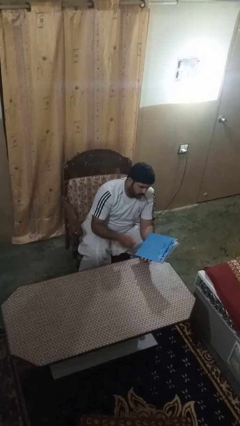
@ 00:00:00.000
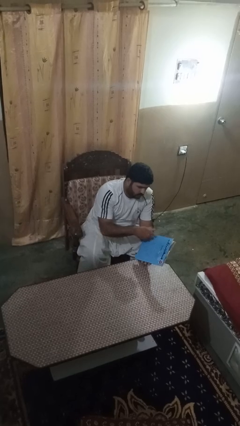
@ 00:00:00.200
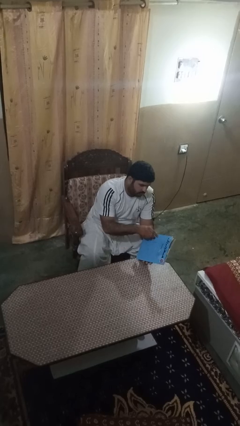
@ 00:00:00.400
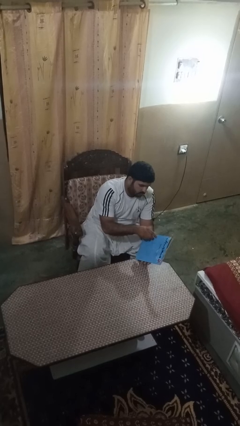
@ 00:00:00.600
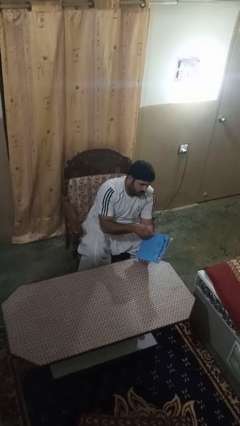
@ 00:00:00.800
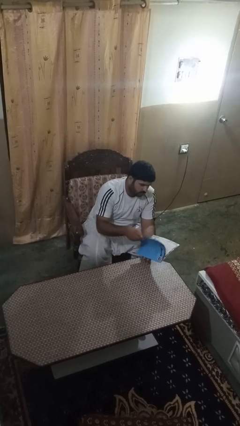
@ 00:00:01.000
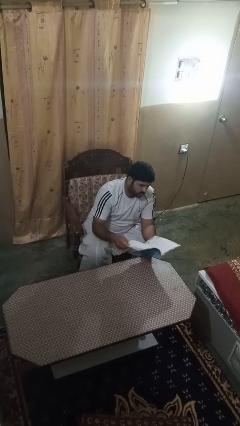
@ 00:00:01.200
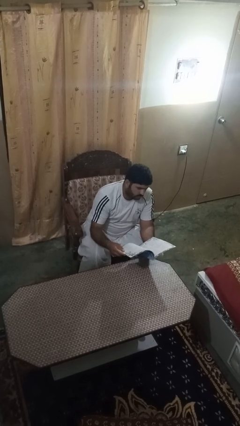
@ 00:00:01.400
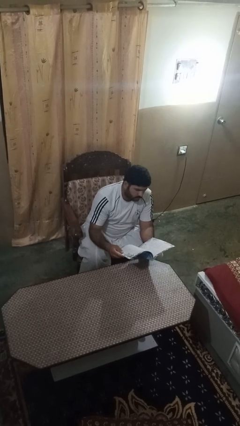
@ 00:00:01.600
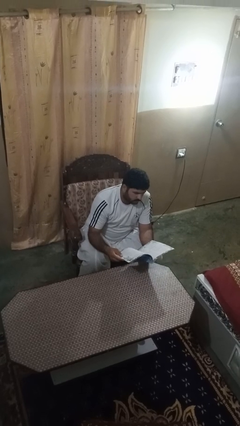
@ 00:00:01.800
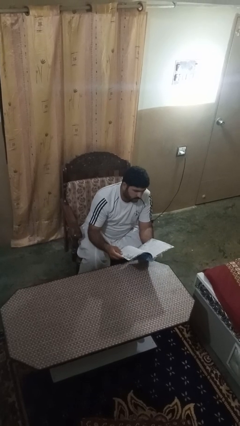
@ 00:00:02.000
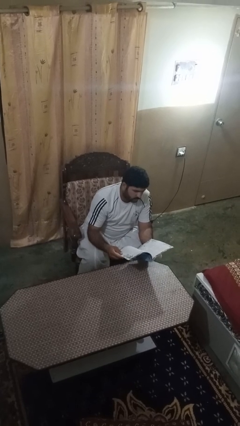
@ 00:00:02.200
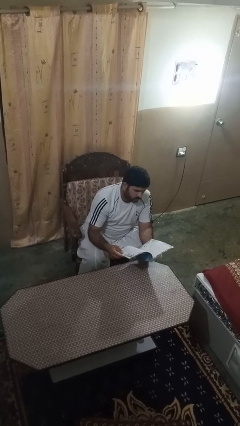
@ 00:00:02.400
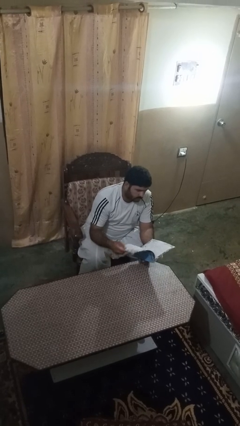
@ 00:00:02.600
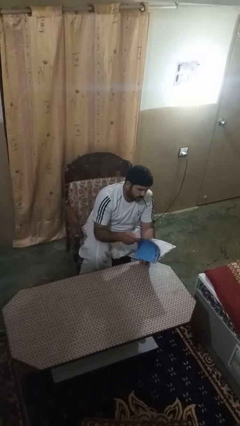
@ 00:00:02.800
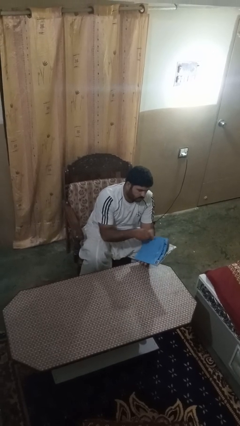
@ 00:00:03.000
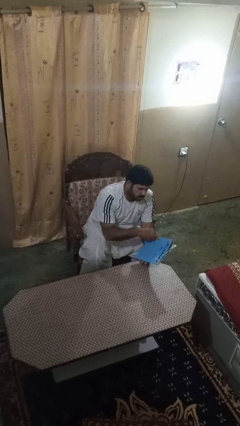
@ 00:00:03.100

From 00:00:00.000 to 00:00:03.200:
person reads magazine

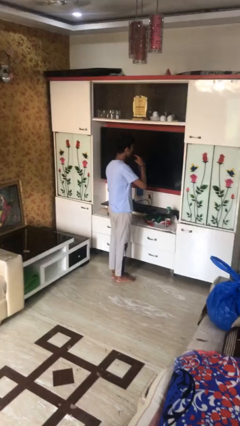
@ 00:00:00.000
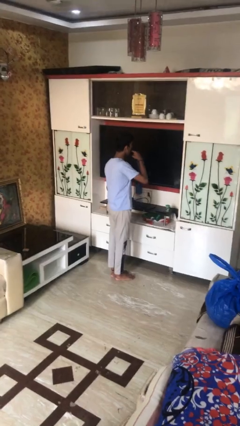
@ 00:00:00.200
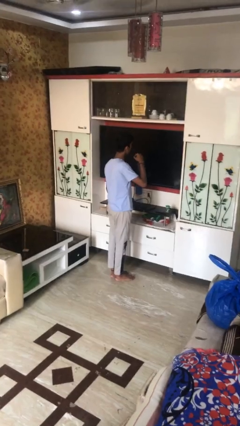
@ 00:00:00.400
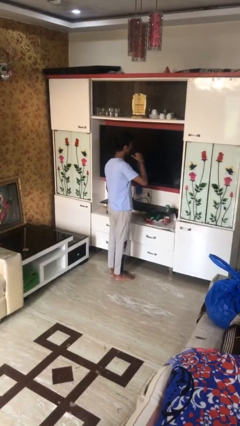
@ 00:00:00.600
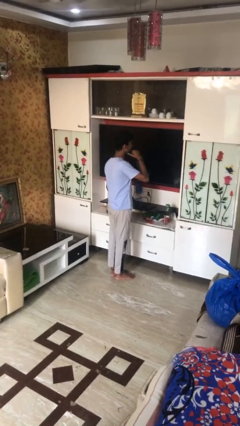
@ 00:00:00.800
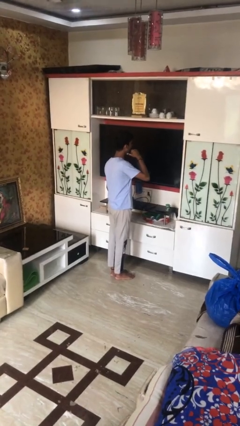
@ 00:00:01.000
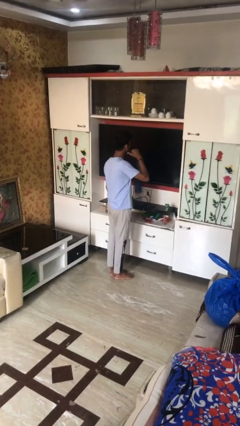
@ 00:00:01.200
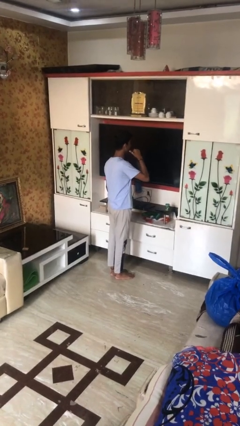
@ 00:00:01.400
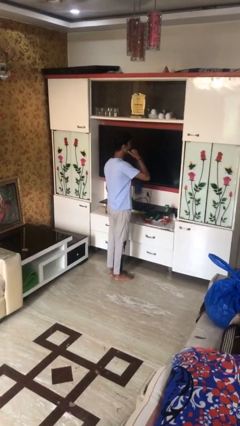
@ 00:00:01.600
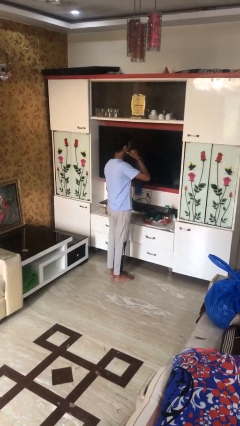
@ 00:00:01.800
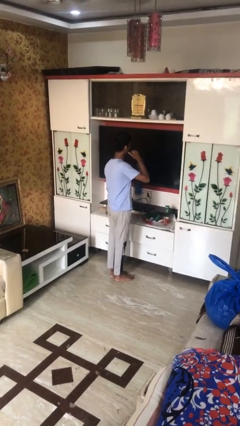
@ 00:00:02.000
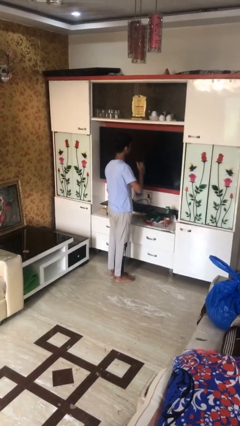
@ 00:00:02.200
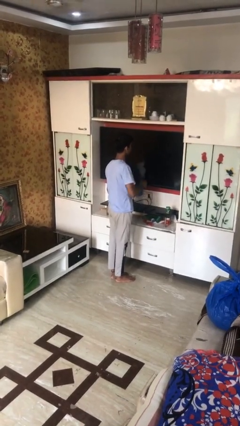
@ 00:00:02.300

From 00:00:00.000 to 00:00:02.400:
person licks fingers

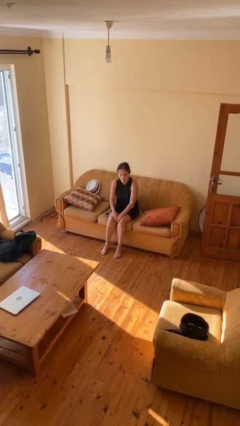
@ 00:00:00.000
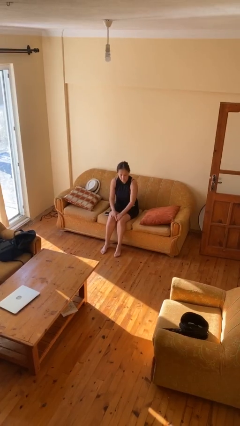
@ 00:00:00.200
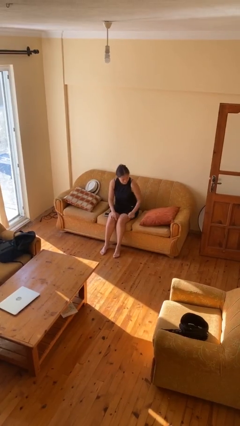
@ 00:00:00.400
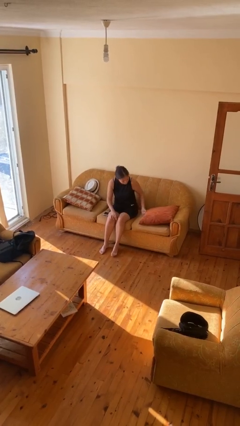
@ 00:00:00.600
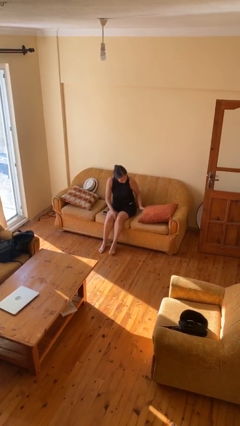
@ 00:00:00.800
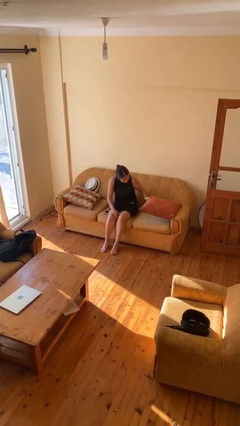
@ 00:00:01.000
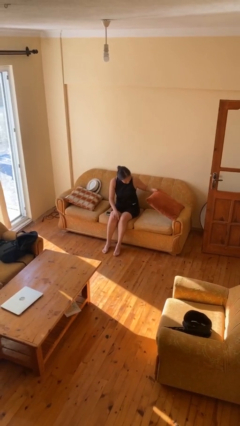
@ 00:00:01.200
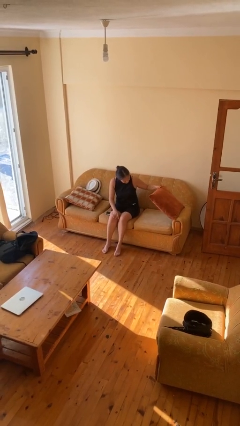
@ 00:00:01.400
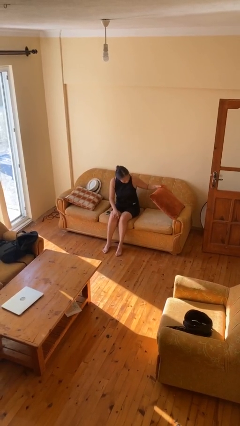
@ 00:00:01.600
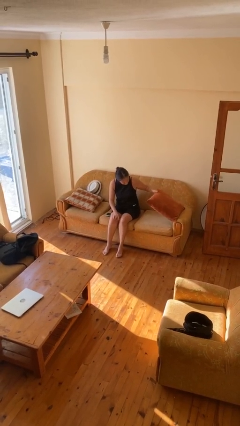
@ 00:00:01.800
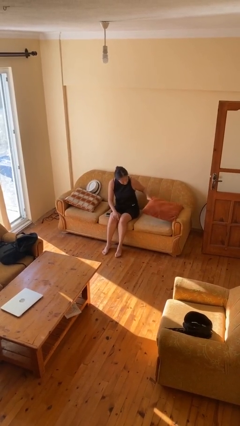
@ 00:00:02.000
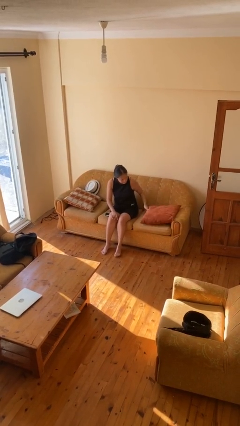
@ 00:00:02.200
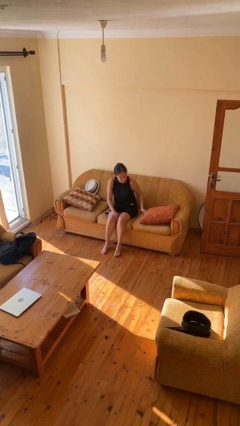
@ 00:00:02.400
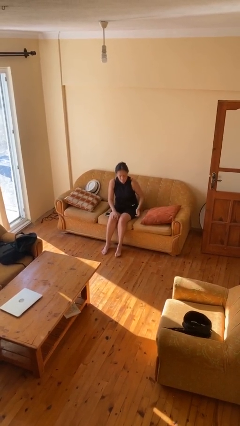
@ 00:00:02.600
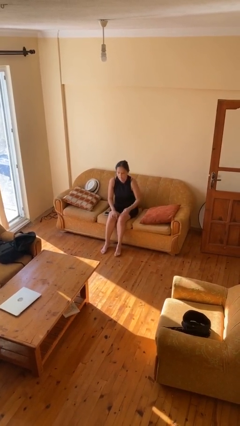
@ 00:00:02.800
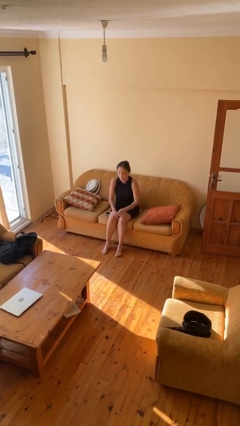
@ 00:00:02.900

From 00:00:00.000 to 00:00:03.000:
person searches in couch

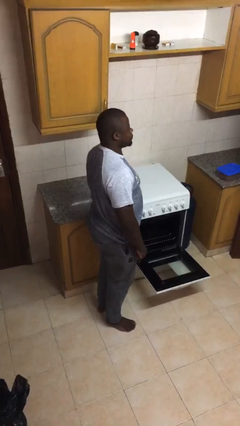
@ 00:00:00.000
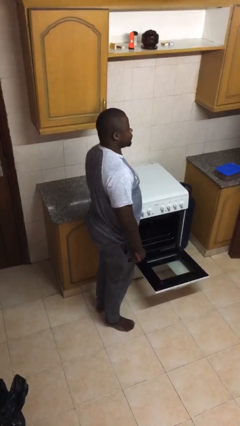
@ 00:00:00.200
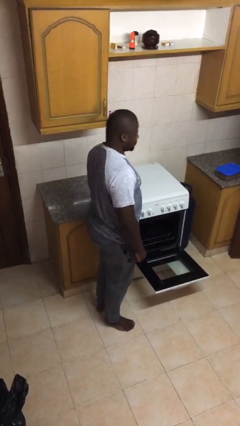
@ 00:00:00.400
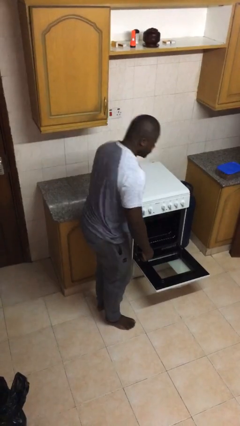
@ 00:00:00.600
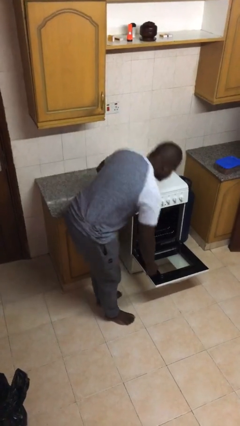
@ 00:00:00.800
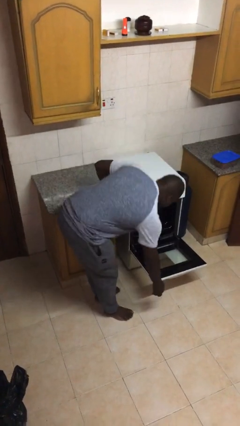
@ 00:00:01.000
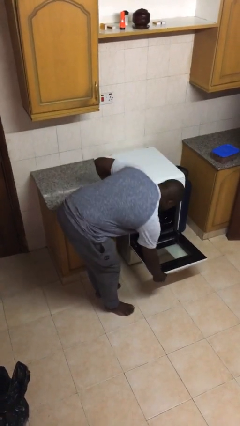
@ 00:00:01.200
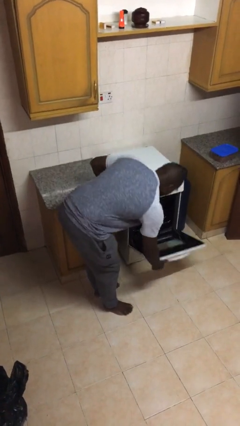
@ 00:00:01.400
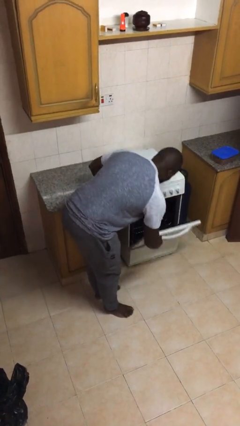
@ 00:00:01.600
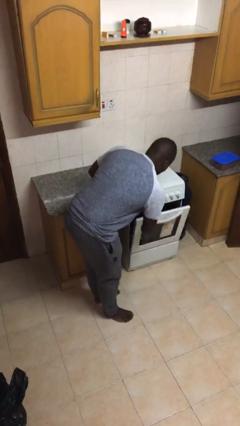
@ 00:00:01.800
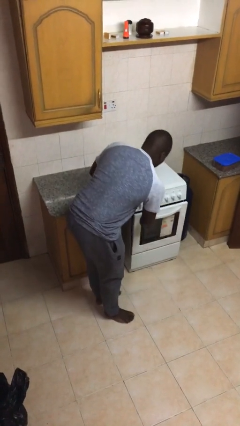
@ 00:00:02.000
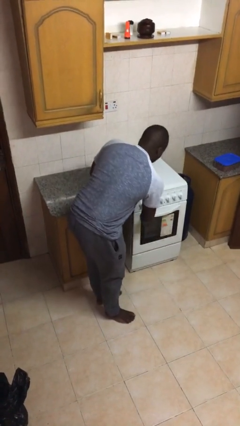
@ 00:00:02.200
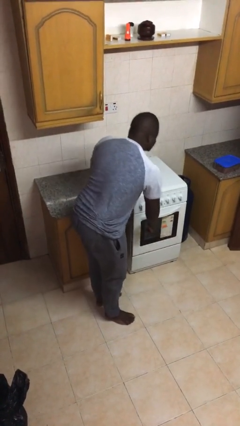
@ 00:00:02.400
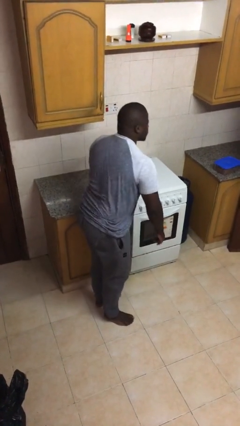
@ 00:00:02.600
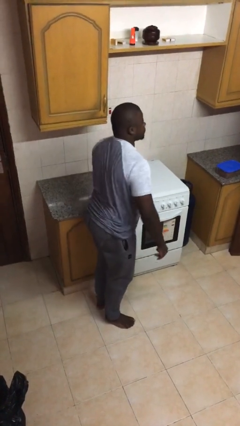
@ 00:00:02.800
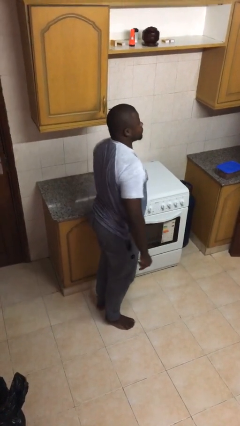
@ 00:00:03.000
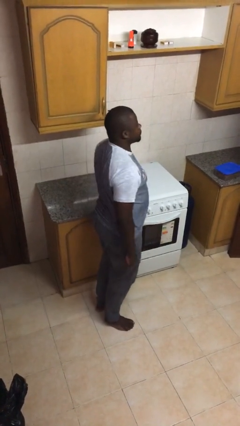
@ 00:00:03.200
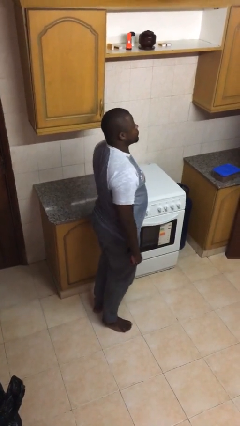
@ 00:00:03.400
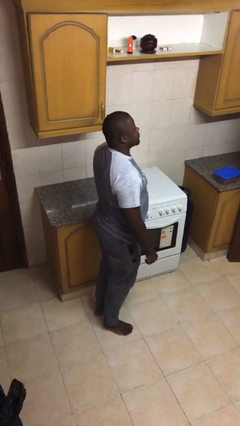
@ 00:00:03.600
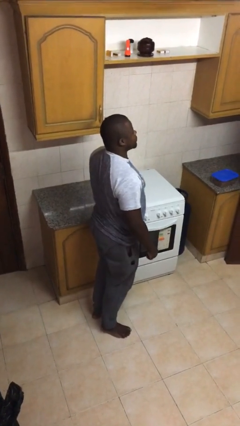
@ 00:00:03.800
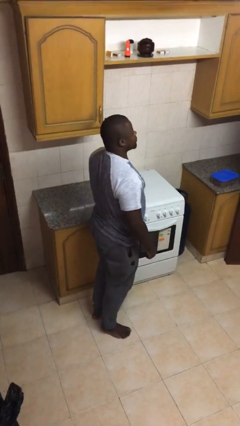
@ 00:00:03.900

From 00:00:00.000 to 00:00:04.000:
person closes oven door

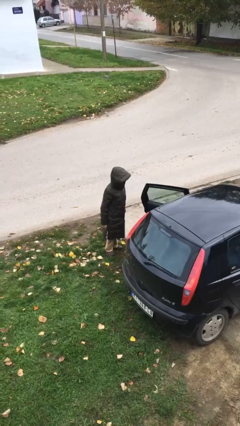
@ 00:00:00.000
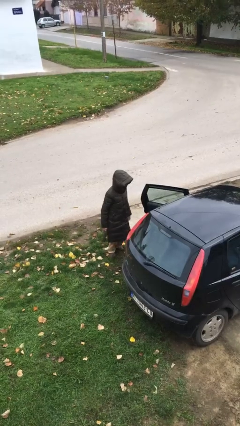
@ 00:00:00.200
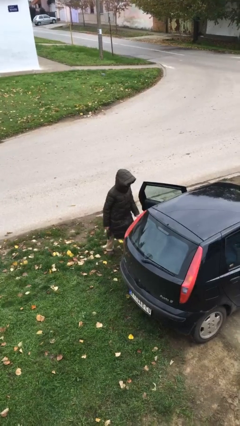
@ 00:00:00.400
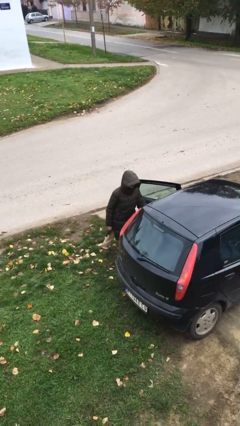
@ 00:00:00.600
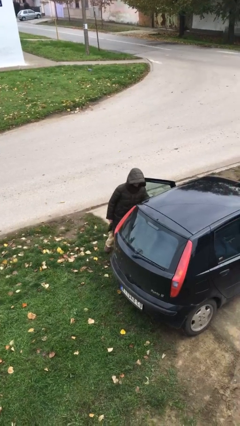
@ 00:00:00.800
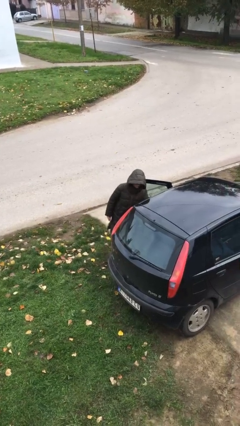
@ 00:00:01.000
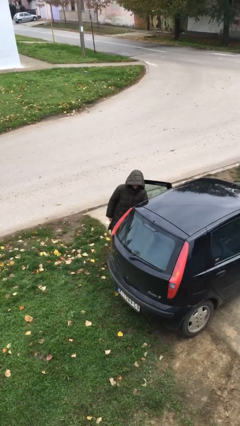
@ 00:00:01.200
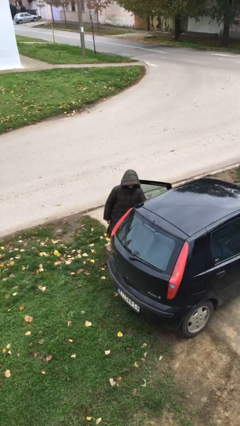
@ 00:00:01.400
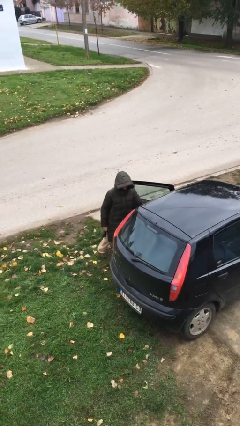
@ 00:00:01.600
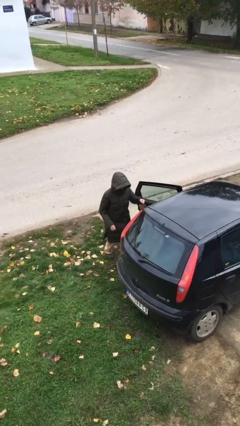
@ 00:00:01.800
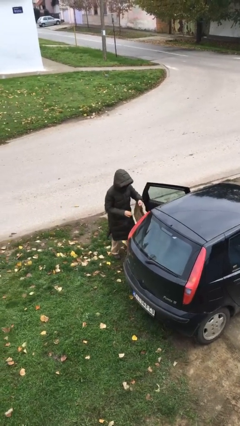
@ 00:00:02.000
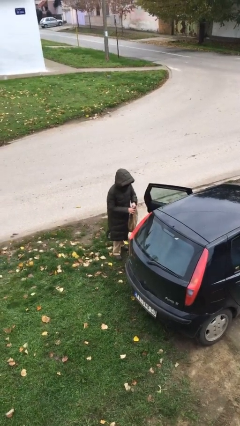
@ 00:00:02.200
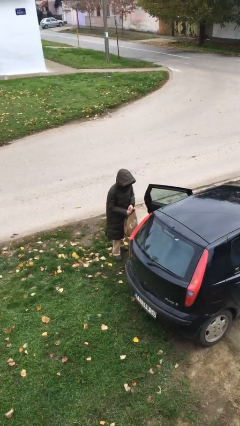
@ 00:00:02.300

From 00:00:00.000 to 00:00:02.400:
person unloads car

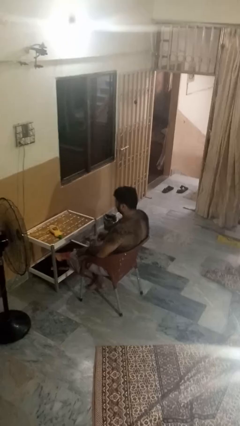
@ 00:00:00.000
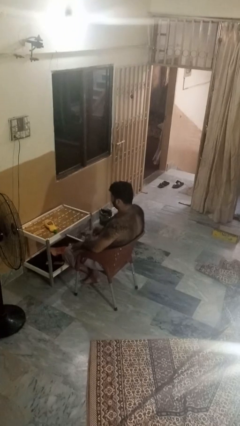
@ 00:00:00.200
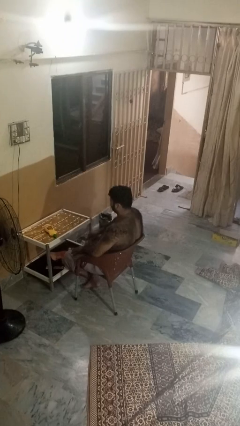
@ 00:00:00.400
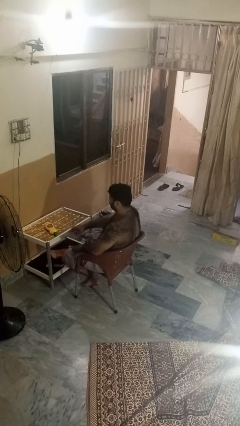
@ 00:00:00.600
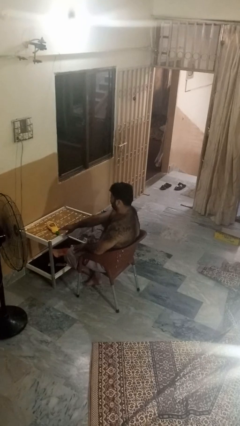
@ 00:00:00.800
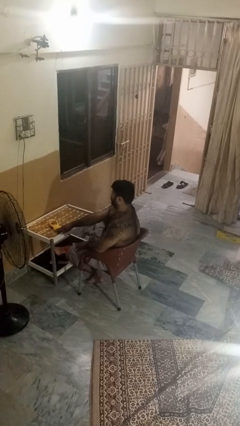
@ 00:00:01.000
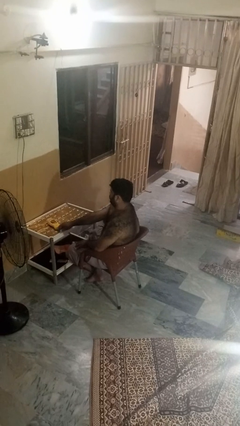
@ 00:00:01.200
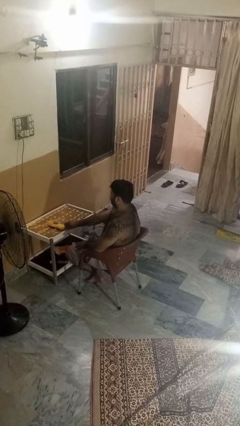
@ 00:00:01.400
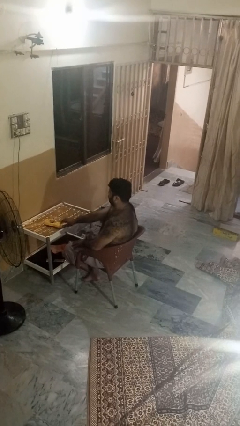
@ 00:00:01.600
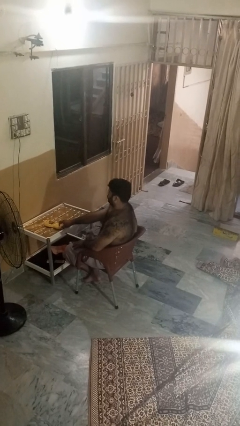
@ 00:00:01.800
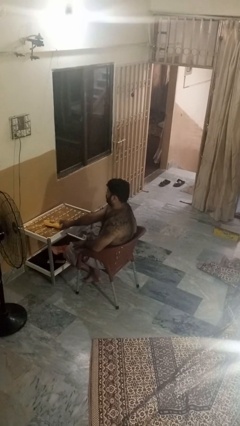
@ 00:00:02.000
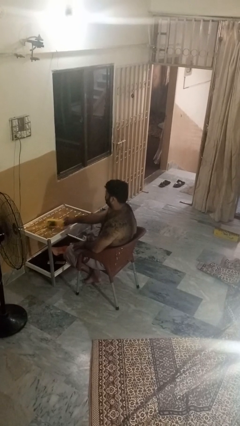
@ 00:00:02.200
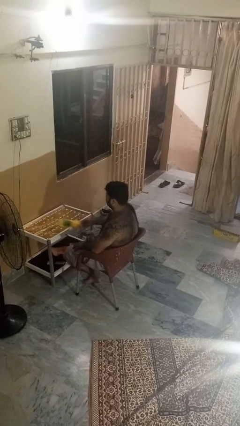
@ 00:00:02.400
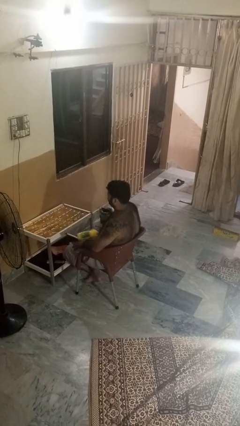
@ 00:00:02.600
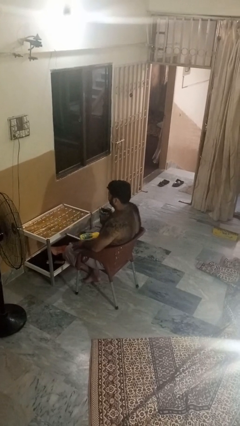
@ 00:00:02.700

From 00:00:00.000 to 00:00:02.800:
person picks up object from table
